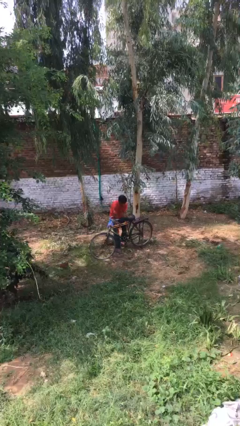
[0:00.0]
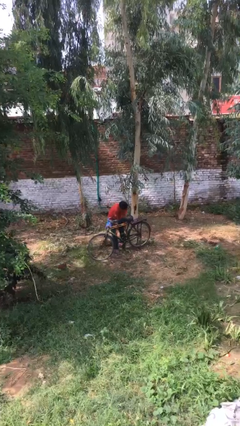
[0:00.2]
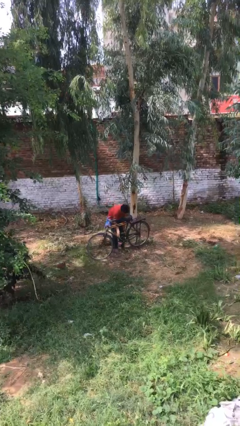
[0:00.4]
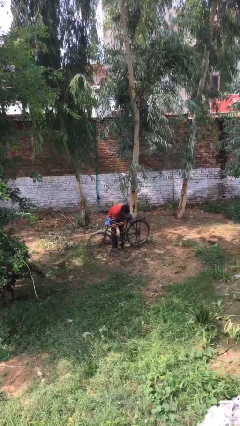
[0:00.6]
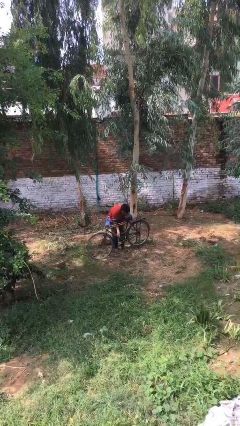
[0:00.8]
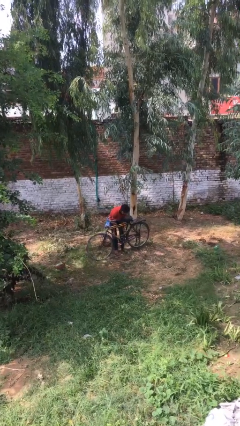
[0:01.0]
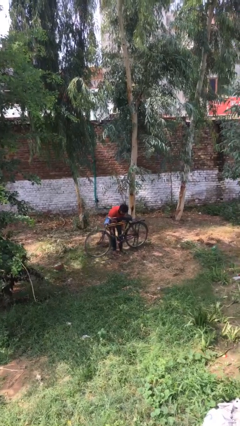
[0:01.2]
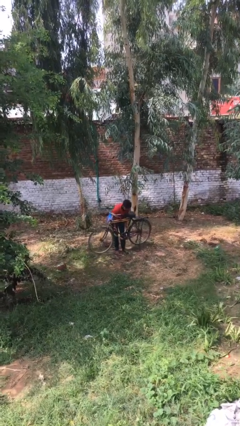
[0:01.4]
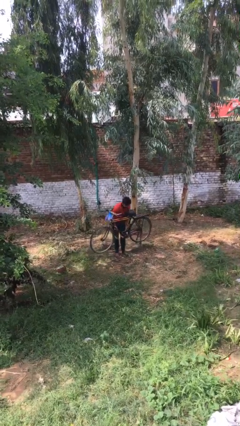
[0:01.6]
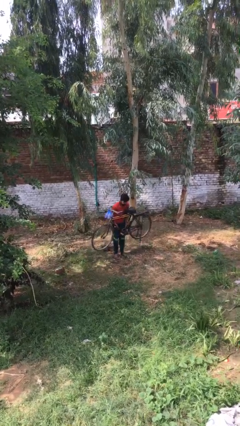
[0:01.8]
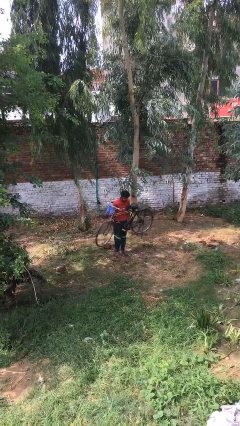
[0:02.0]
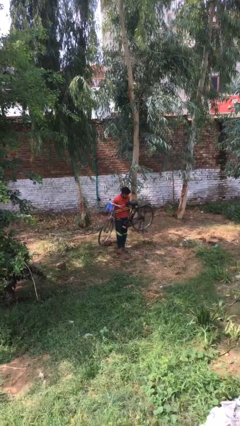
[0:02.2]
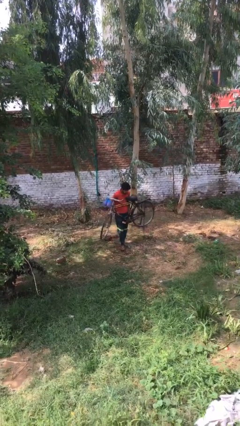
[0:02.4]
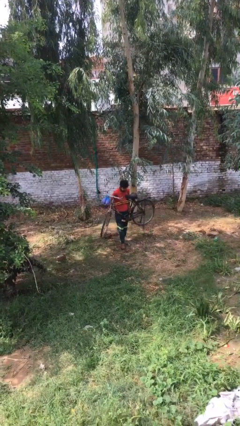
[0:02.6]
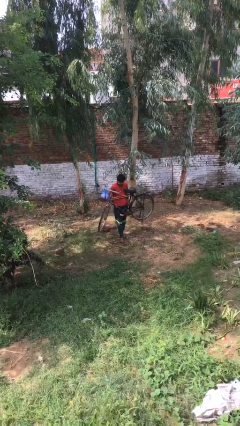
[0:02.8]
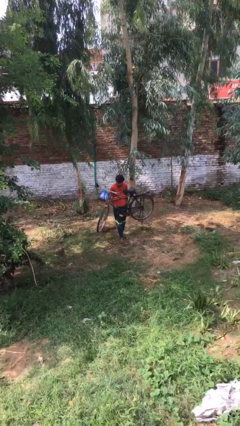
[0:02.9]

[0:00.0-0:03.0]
person picks up object from floor

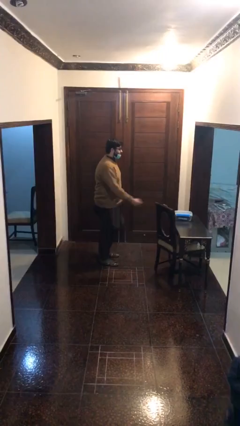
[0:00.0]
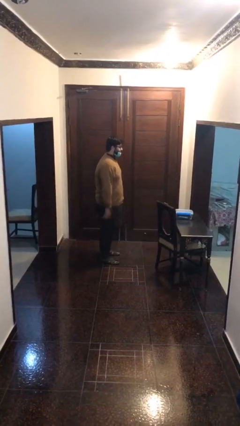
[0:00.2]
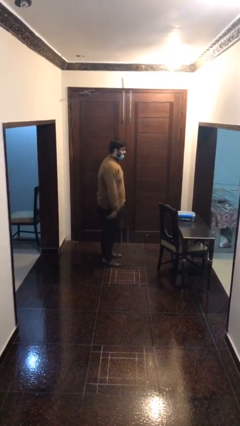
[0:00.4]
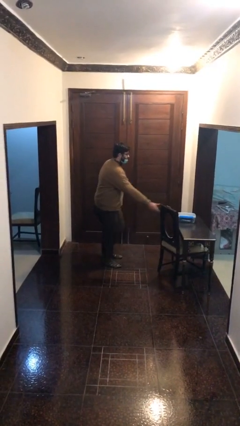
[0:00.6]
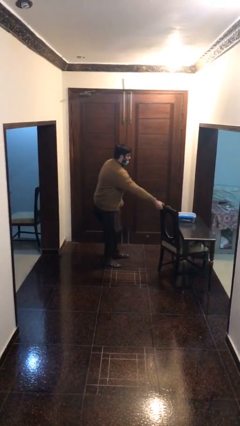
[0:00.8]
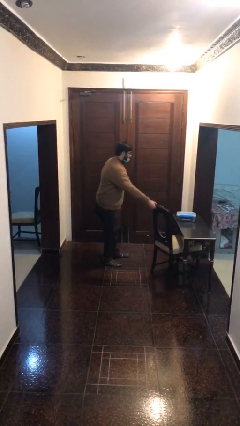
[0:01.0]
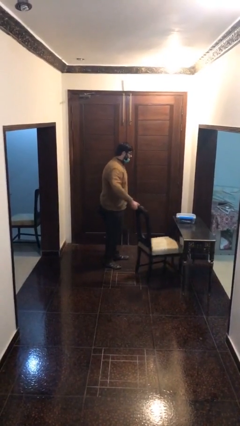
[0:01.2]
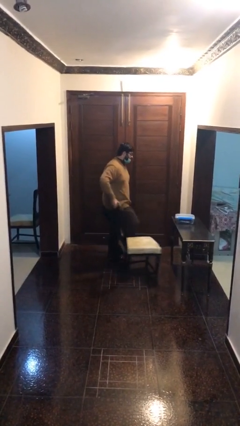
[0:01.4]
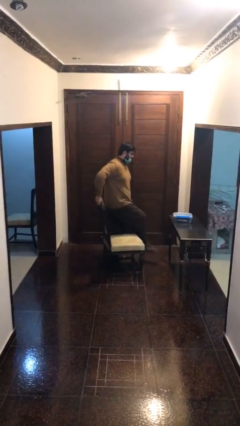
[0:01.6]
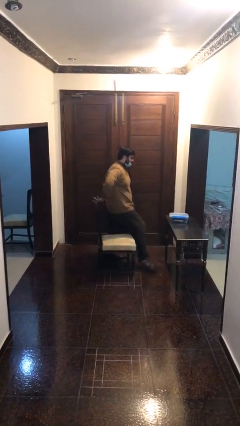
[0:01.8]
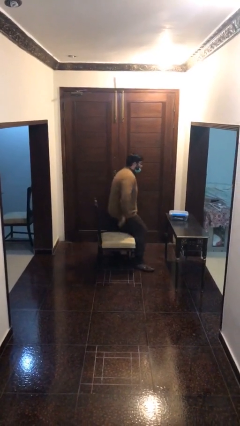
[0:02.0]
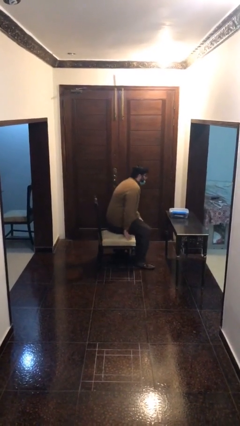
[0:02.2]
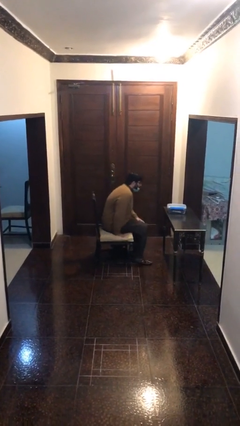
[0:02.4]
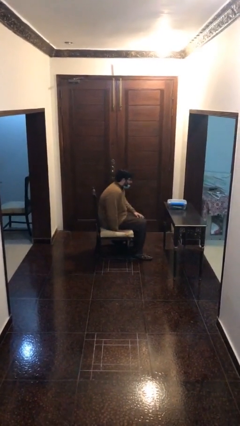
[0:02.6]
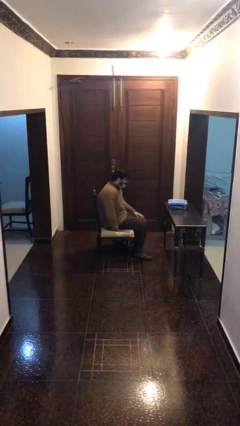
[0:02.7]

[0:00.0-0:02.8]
person sits down

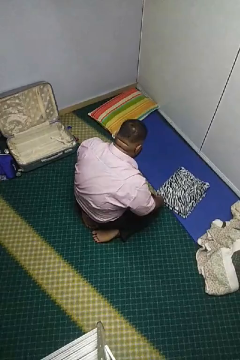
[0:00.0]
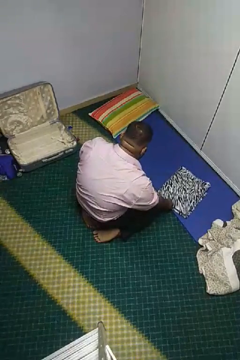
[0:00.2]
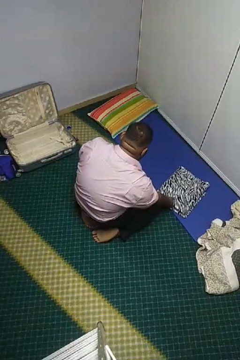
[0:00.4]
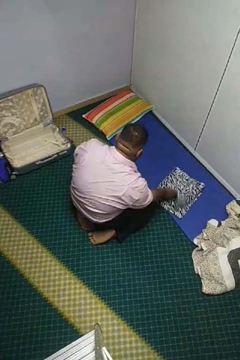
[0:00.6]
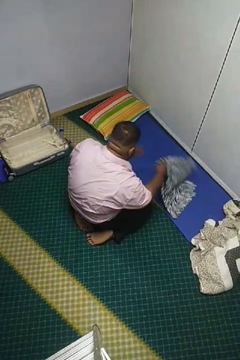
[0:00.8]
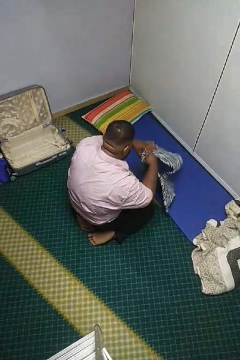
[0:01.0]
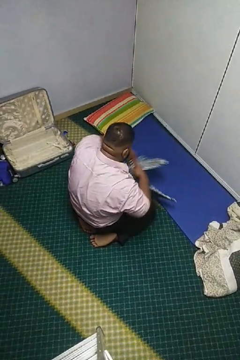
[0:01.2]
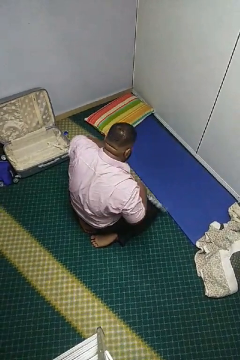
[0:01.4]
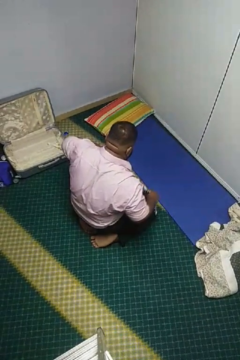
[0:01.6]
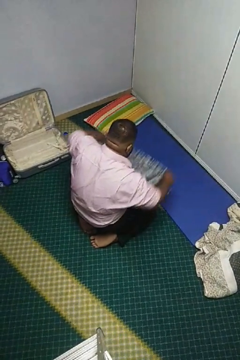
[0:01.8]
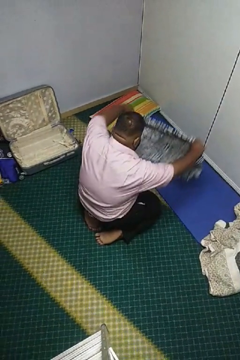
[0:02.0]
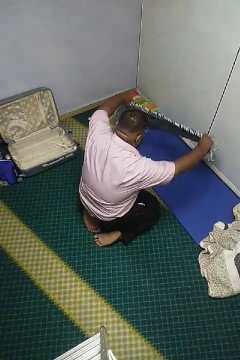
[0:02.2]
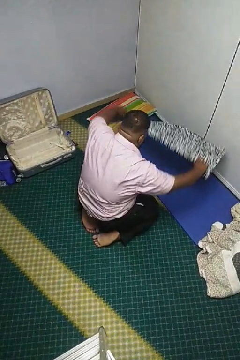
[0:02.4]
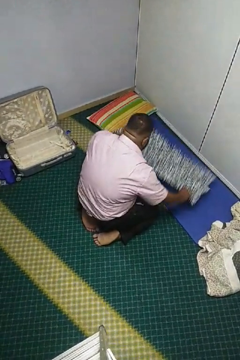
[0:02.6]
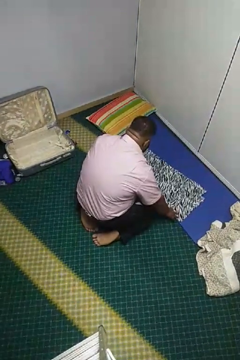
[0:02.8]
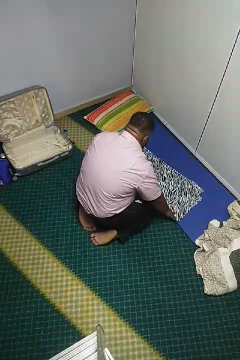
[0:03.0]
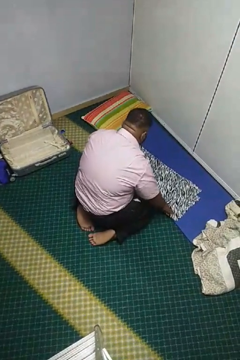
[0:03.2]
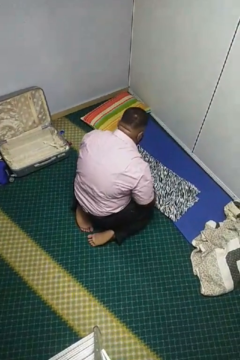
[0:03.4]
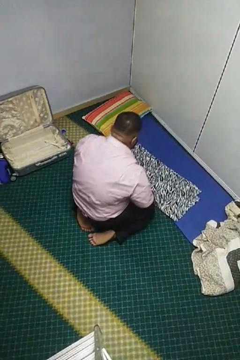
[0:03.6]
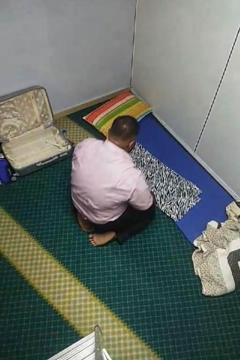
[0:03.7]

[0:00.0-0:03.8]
person unfolds blanket

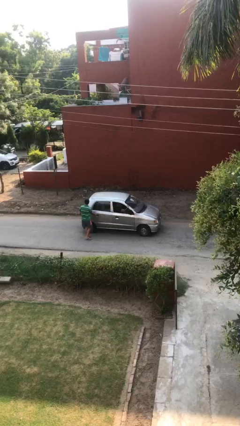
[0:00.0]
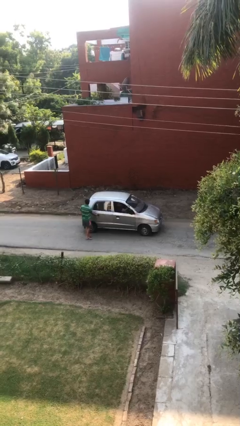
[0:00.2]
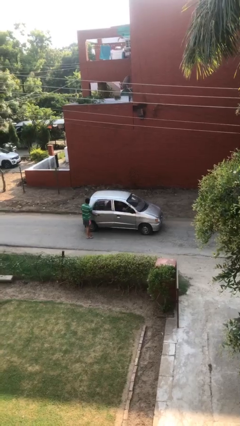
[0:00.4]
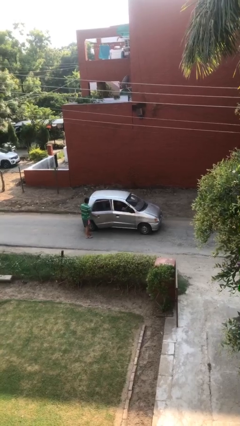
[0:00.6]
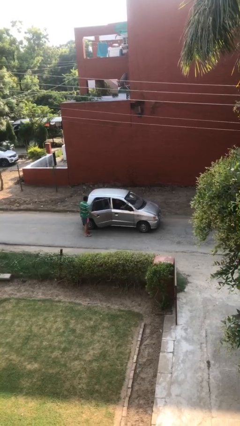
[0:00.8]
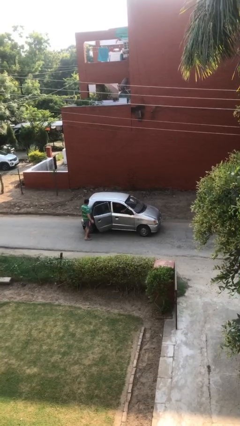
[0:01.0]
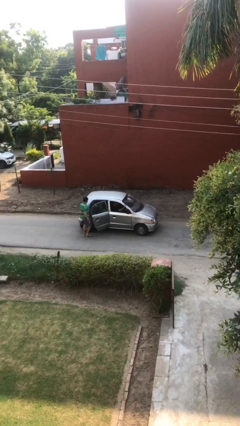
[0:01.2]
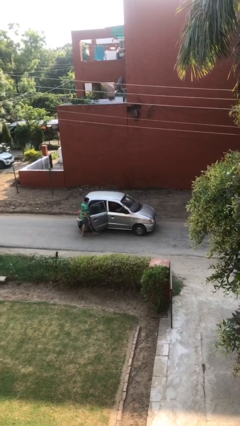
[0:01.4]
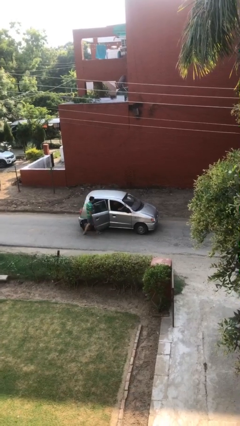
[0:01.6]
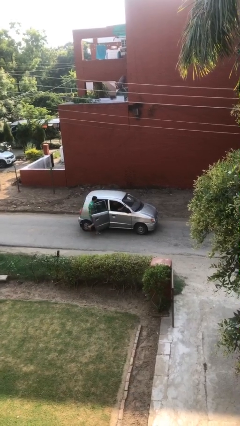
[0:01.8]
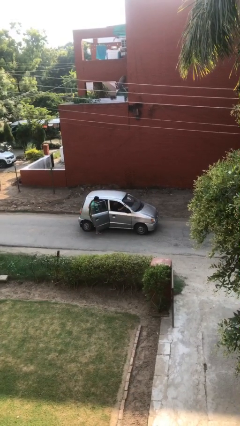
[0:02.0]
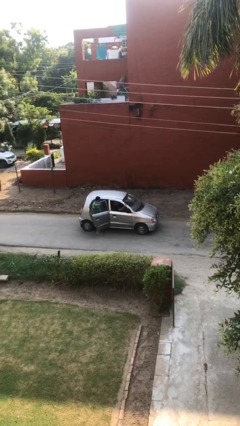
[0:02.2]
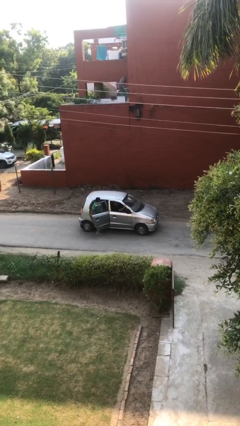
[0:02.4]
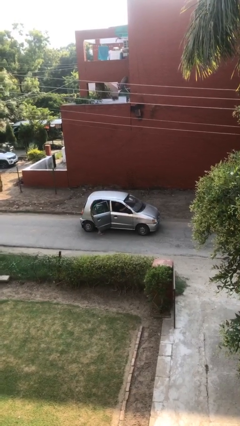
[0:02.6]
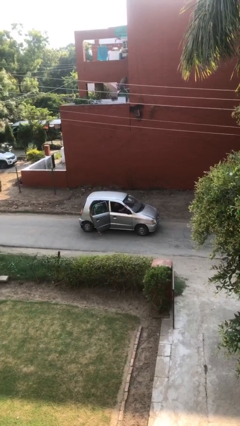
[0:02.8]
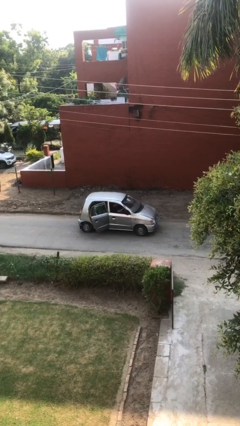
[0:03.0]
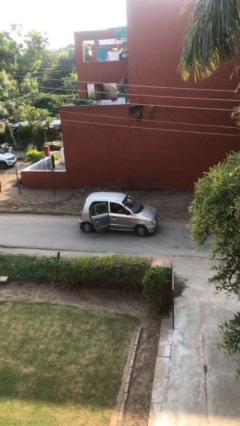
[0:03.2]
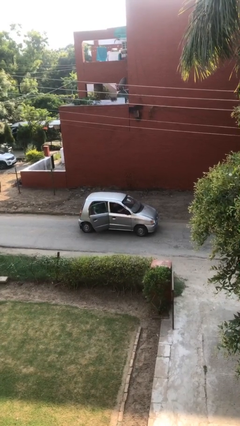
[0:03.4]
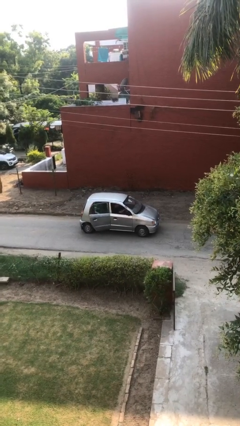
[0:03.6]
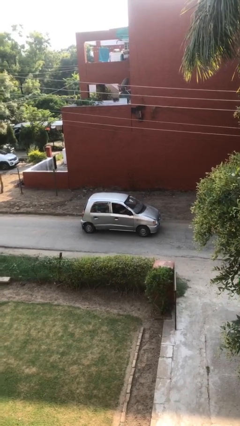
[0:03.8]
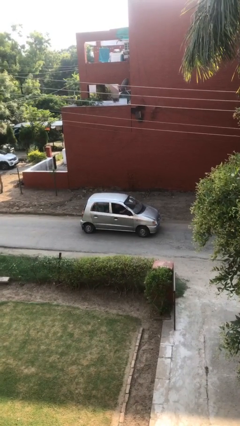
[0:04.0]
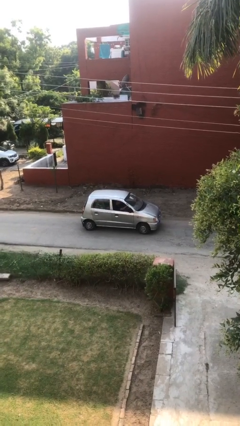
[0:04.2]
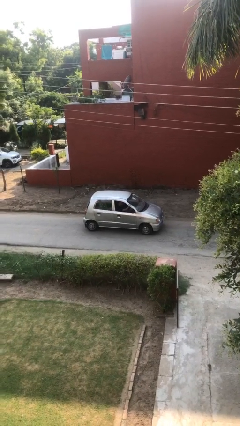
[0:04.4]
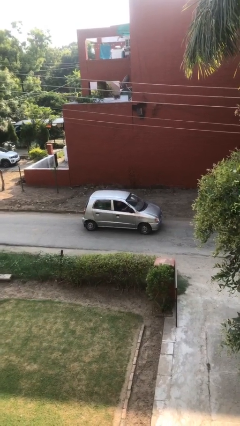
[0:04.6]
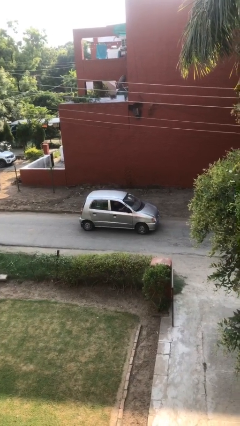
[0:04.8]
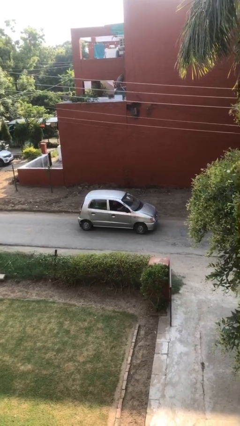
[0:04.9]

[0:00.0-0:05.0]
car picks up person

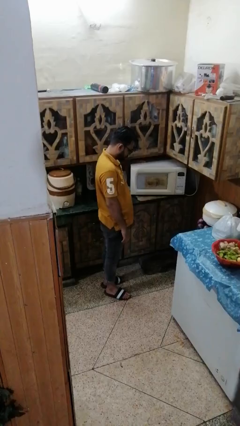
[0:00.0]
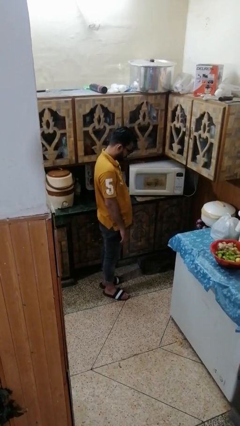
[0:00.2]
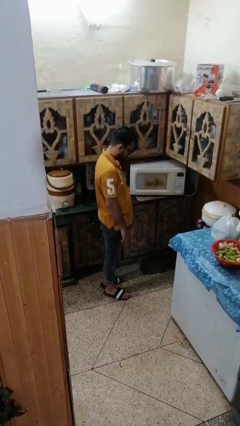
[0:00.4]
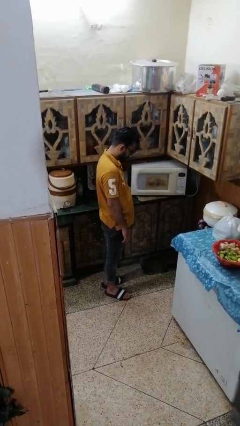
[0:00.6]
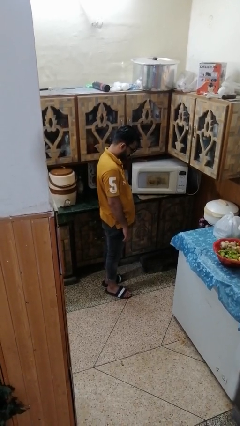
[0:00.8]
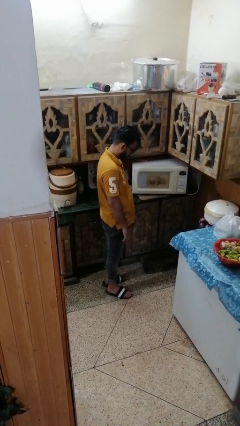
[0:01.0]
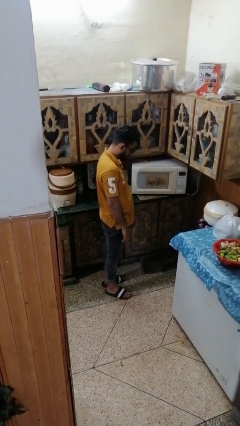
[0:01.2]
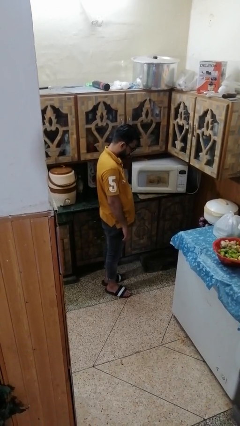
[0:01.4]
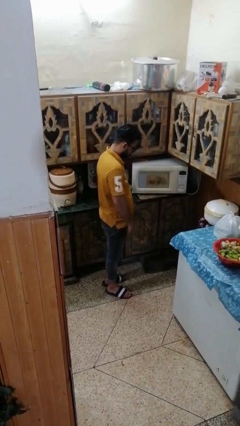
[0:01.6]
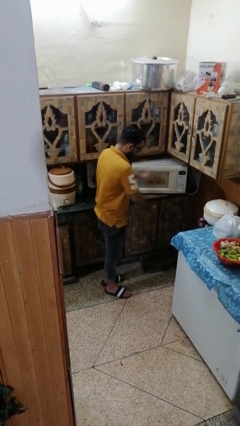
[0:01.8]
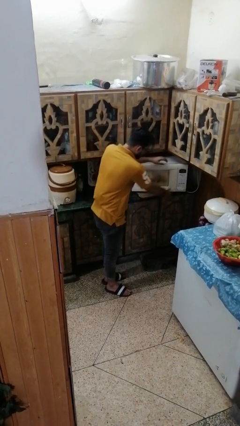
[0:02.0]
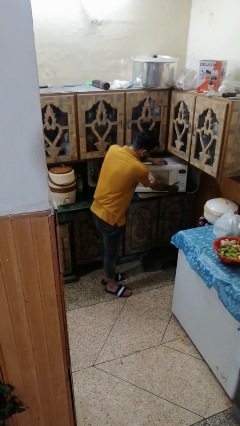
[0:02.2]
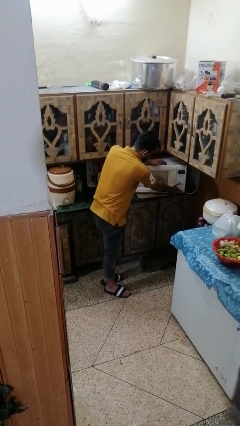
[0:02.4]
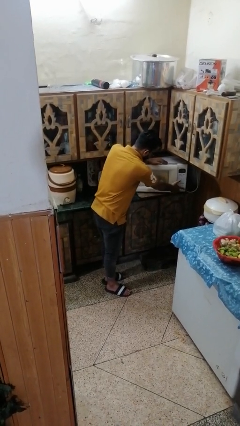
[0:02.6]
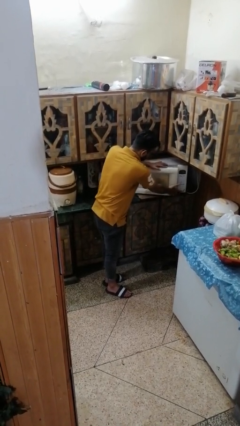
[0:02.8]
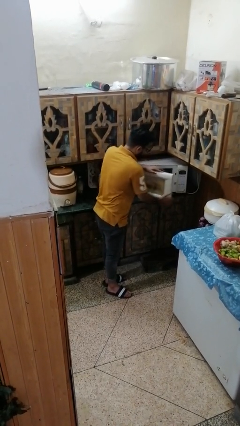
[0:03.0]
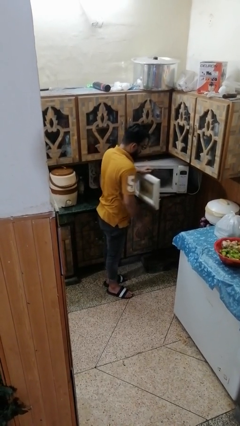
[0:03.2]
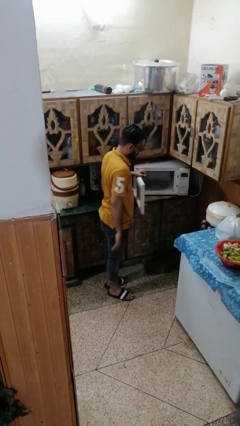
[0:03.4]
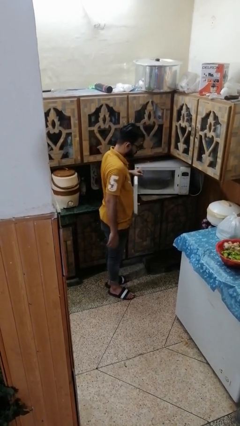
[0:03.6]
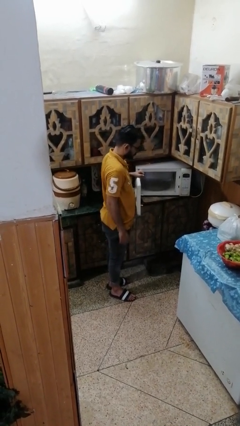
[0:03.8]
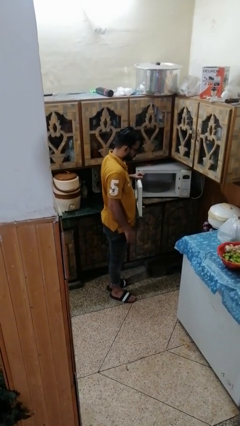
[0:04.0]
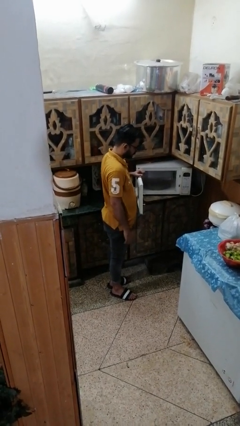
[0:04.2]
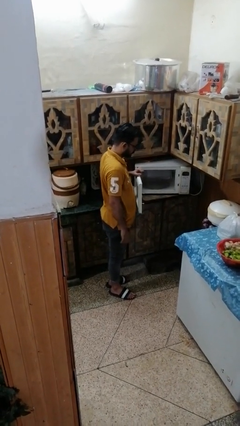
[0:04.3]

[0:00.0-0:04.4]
person opens microwave
